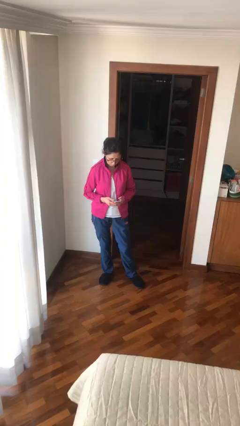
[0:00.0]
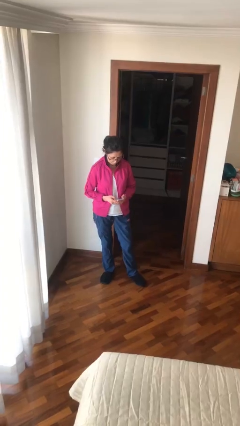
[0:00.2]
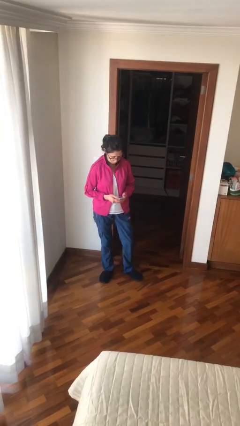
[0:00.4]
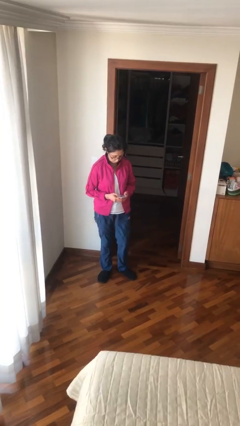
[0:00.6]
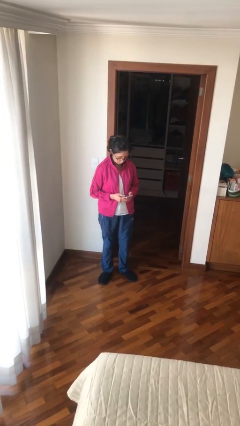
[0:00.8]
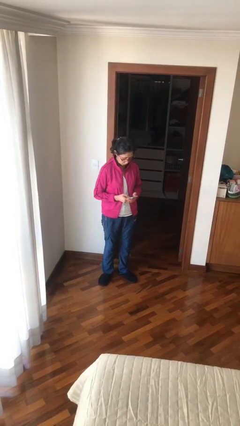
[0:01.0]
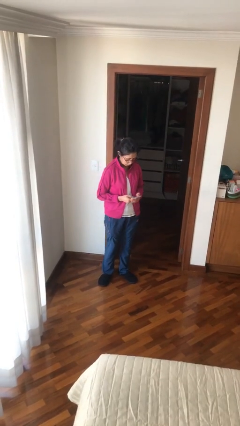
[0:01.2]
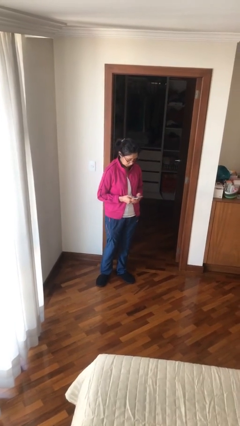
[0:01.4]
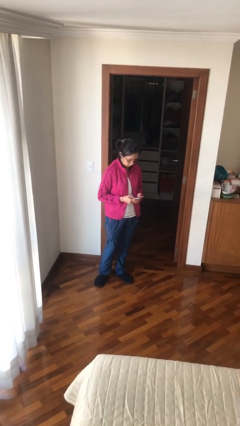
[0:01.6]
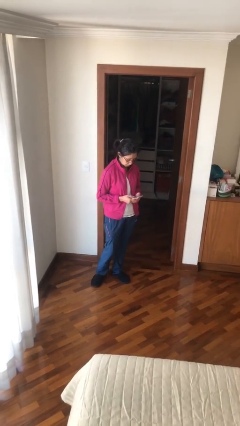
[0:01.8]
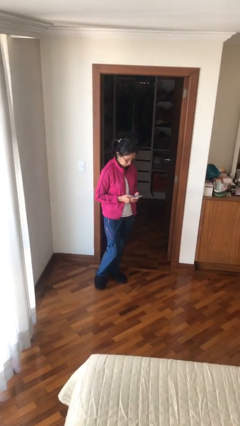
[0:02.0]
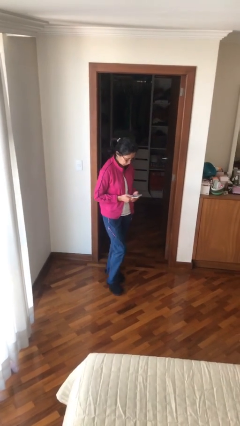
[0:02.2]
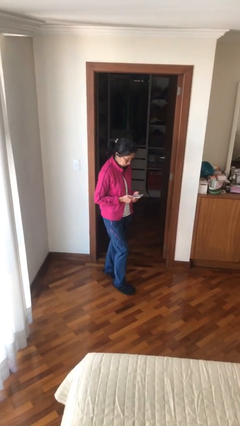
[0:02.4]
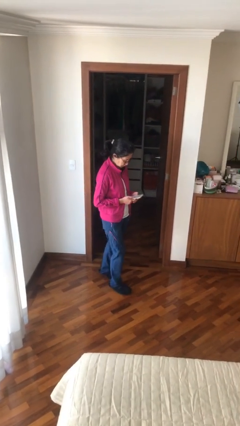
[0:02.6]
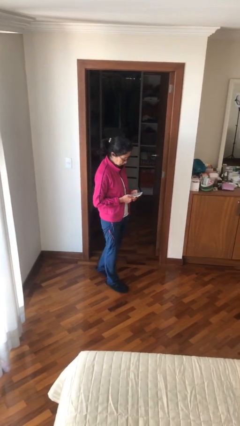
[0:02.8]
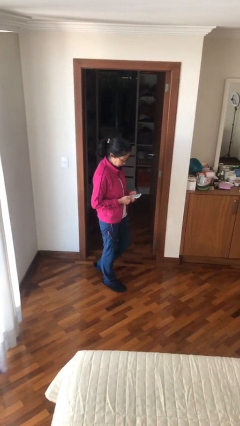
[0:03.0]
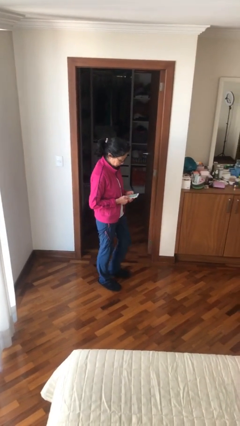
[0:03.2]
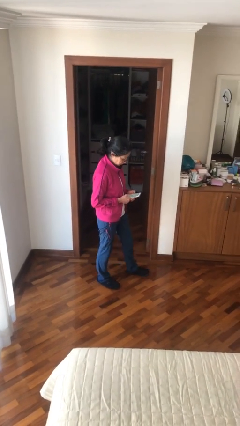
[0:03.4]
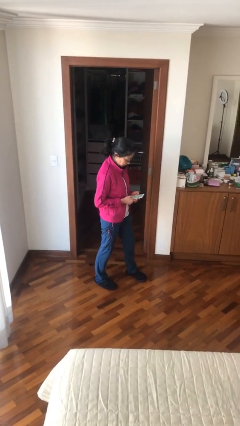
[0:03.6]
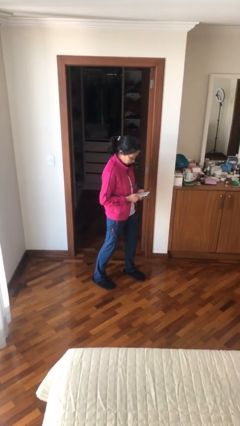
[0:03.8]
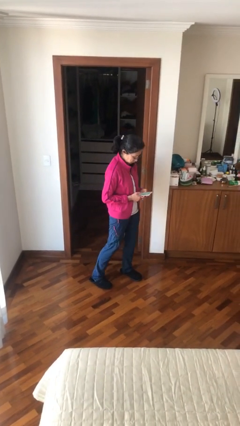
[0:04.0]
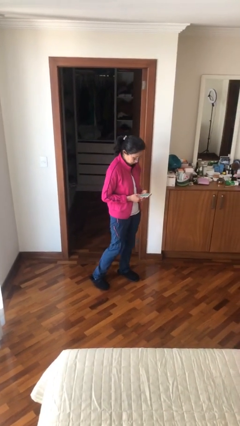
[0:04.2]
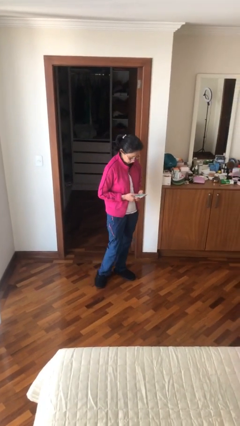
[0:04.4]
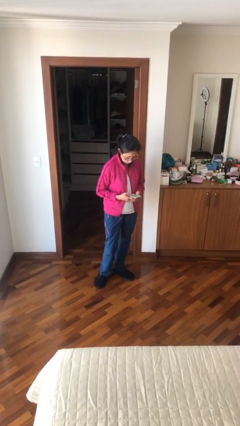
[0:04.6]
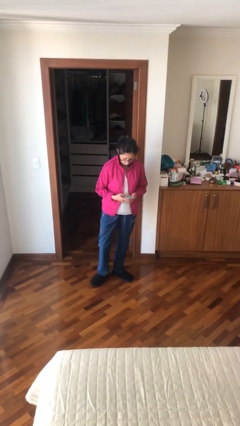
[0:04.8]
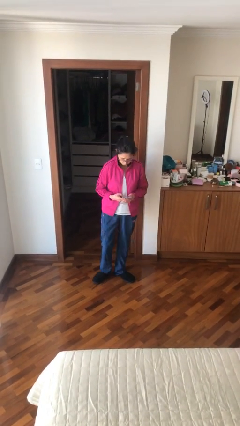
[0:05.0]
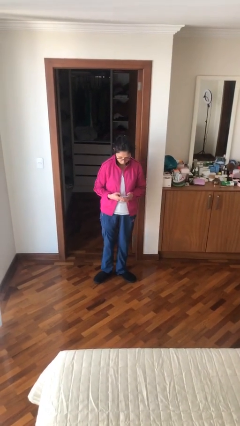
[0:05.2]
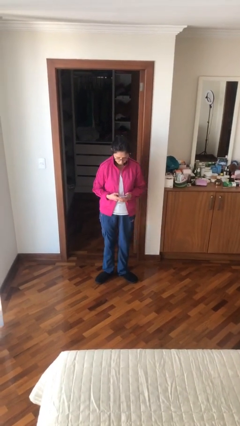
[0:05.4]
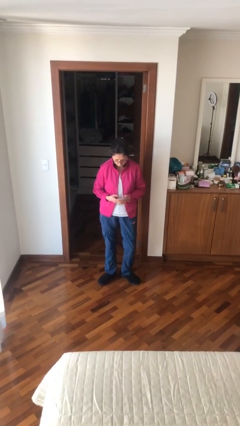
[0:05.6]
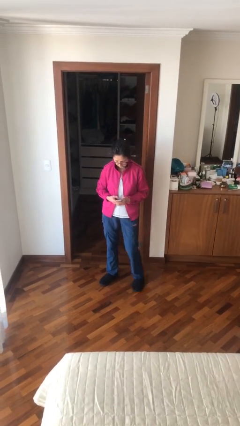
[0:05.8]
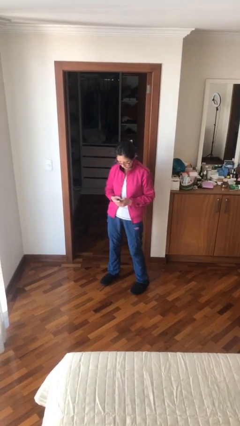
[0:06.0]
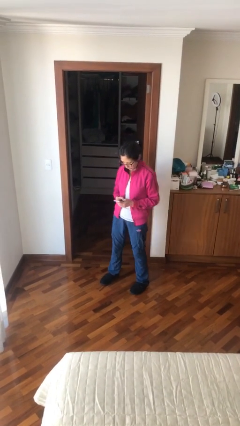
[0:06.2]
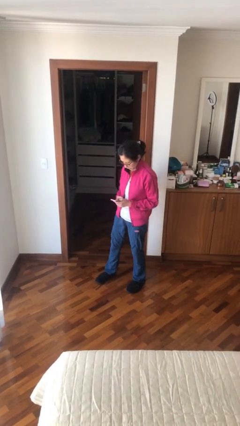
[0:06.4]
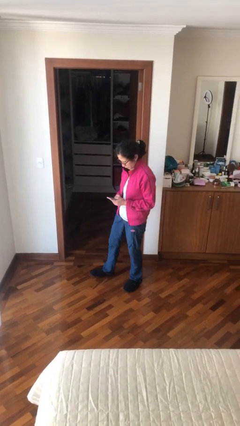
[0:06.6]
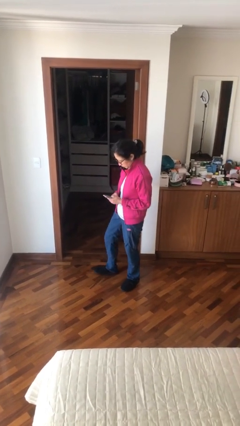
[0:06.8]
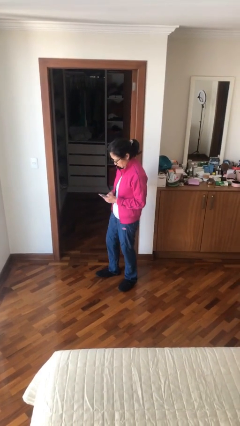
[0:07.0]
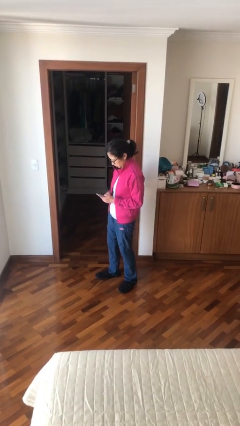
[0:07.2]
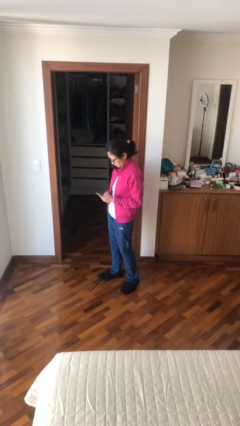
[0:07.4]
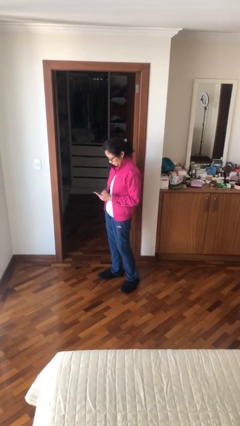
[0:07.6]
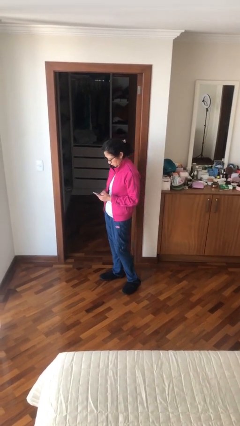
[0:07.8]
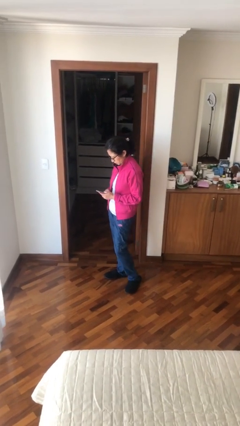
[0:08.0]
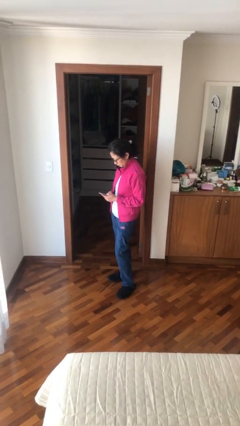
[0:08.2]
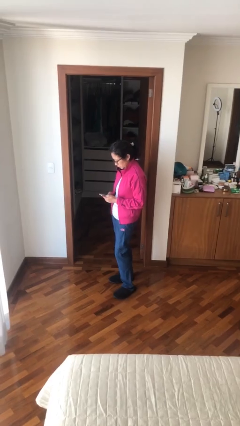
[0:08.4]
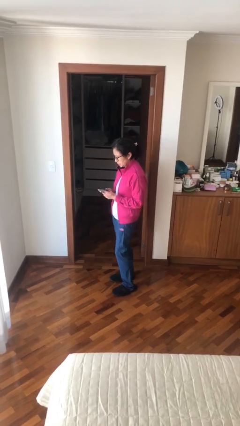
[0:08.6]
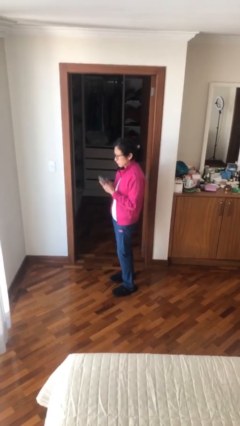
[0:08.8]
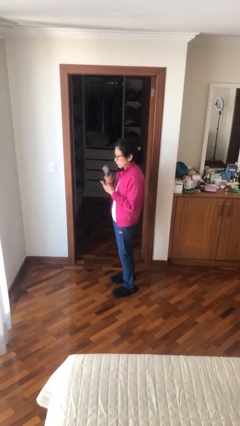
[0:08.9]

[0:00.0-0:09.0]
person texts on phone

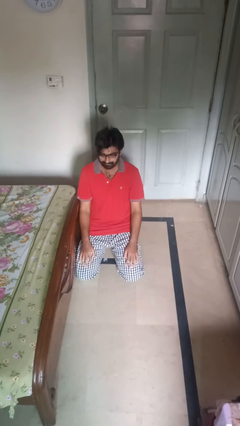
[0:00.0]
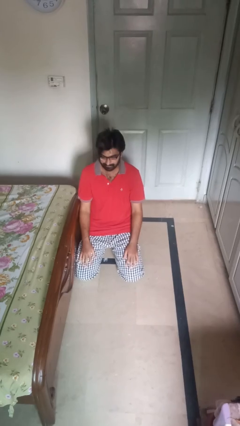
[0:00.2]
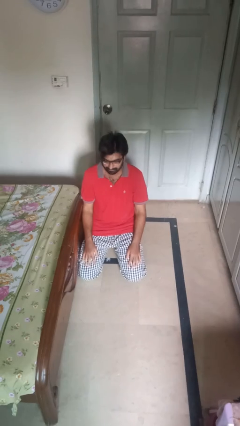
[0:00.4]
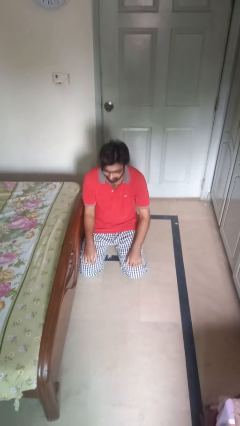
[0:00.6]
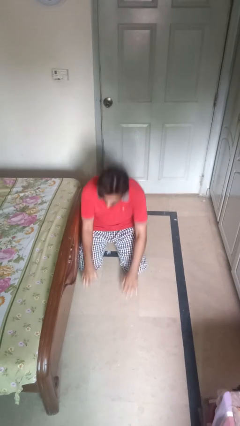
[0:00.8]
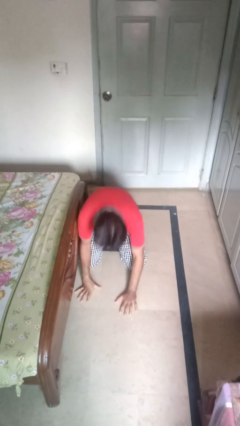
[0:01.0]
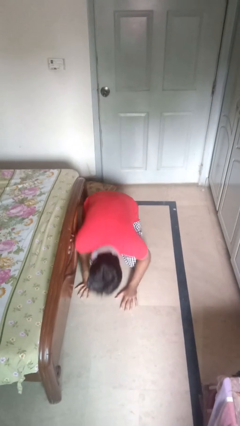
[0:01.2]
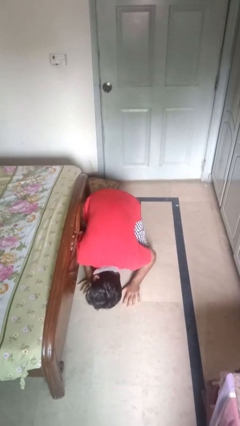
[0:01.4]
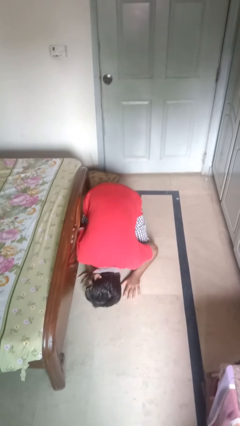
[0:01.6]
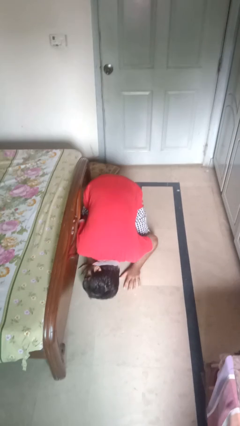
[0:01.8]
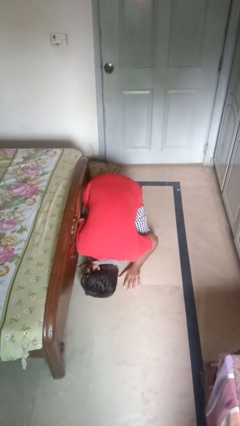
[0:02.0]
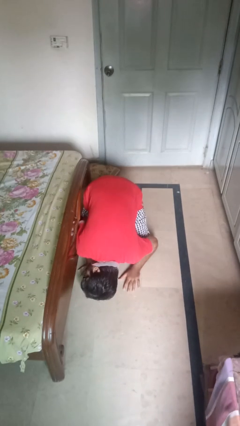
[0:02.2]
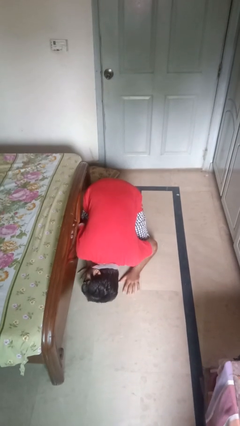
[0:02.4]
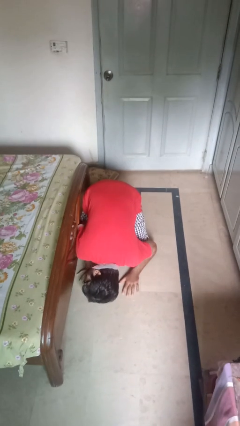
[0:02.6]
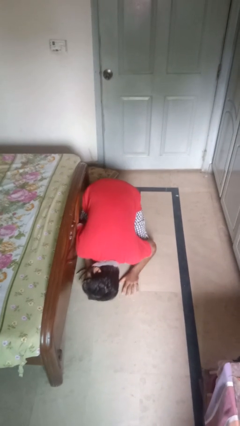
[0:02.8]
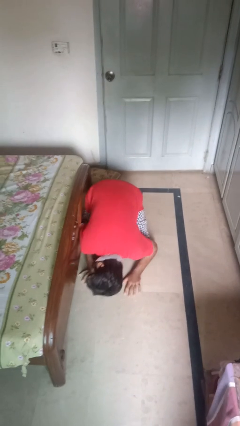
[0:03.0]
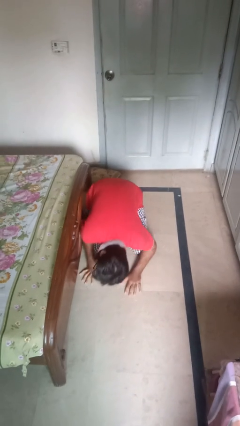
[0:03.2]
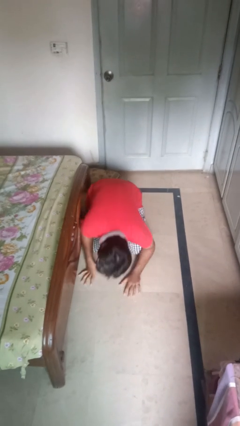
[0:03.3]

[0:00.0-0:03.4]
person searches under bed

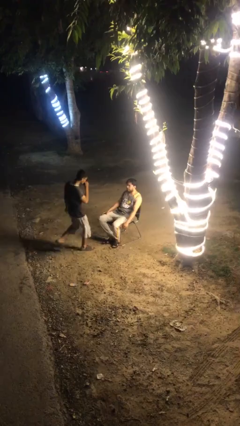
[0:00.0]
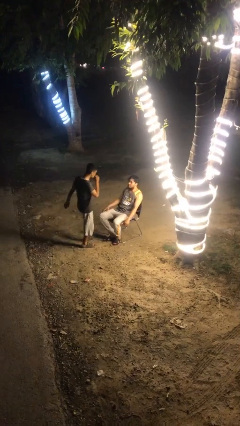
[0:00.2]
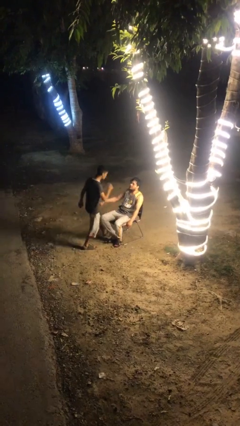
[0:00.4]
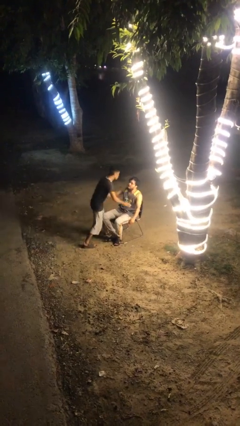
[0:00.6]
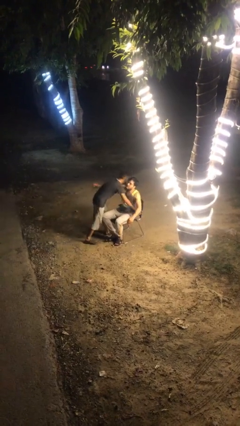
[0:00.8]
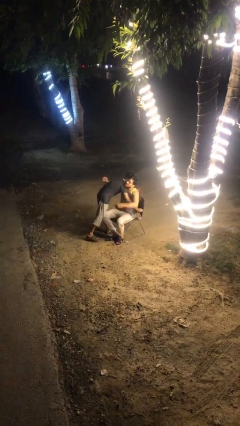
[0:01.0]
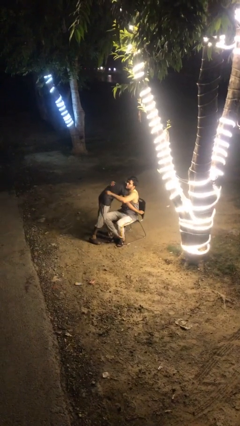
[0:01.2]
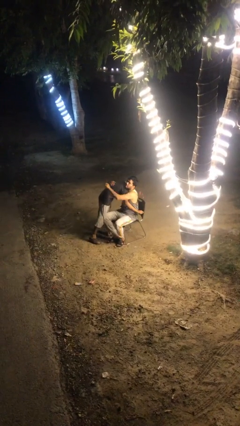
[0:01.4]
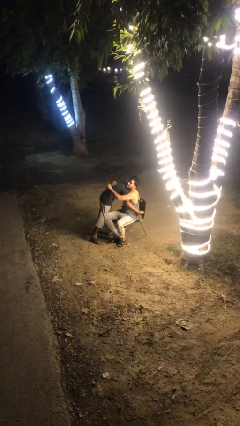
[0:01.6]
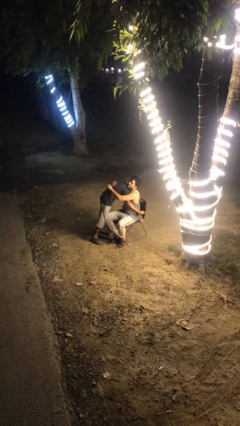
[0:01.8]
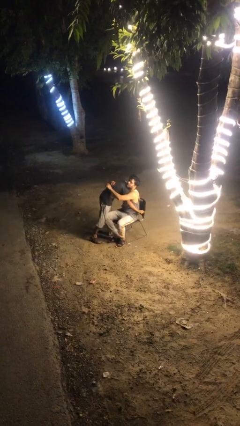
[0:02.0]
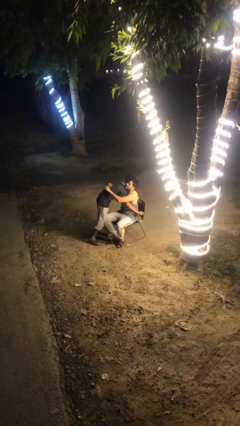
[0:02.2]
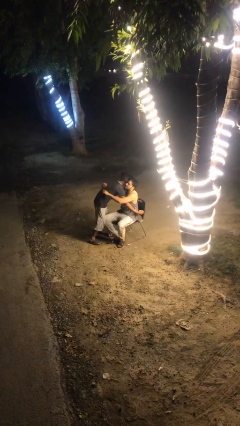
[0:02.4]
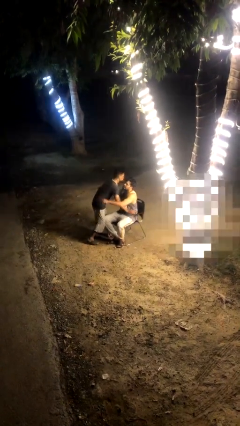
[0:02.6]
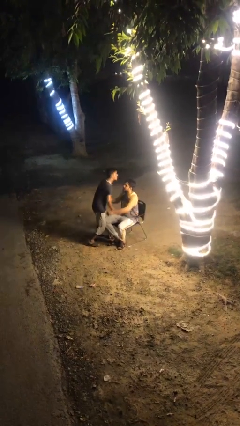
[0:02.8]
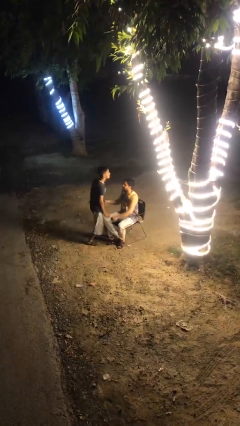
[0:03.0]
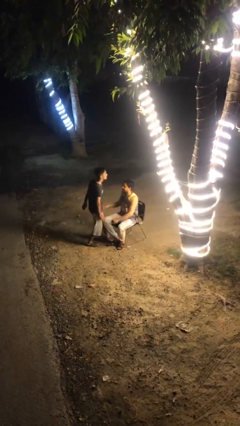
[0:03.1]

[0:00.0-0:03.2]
person embraces person

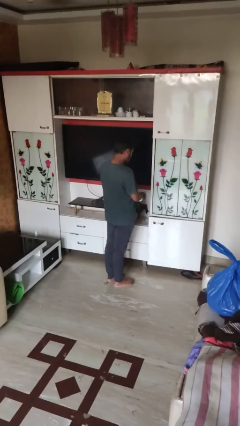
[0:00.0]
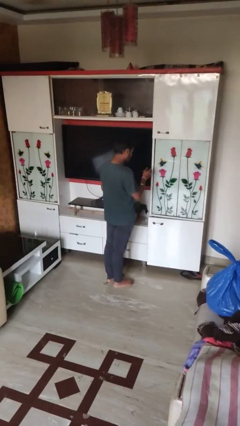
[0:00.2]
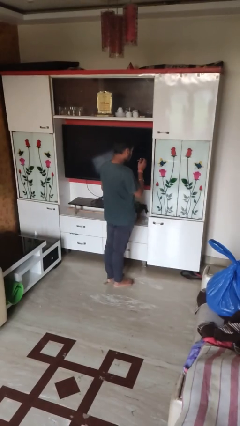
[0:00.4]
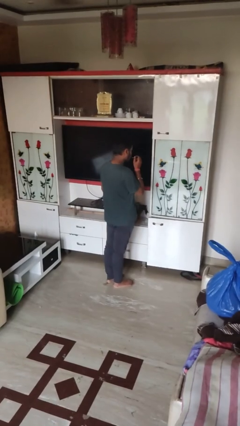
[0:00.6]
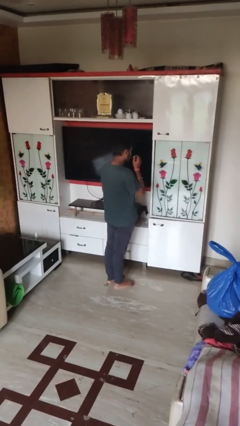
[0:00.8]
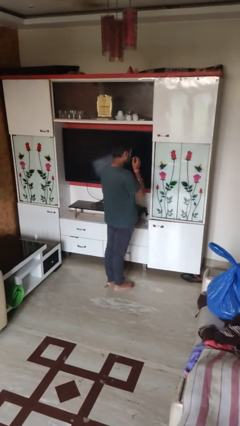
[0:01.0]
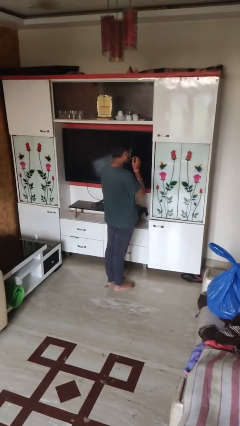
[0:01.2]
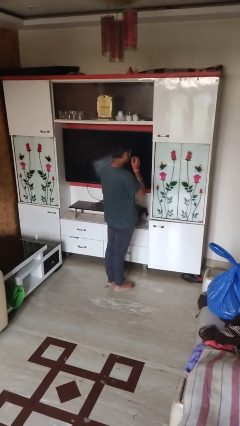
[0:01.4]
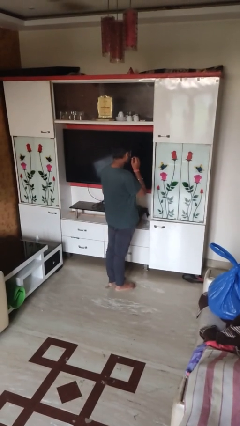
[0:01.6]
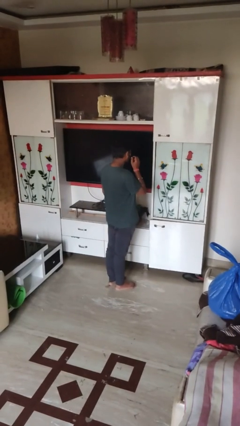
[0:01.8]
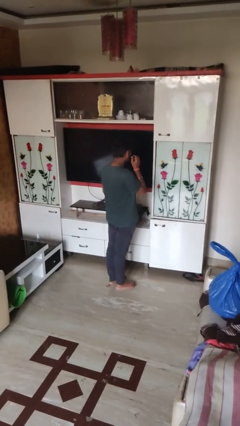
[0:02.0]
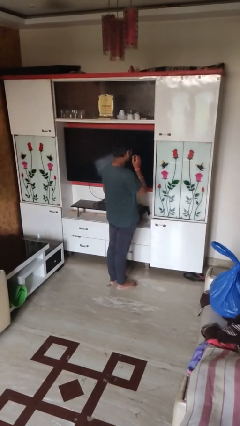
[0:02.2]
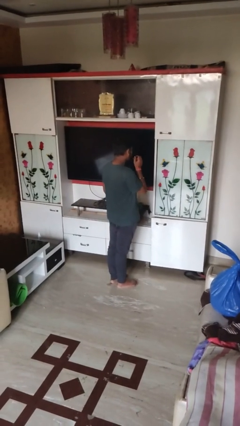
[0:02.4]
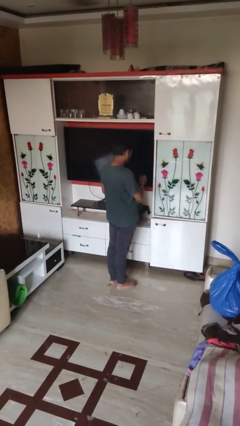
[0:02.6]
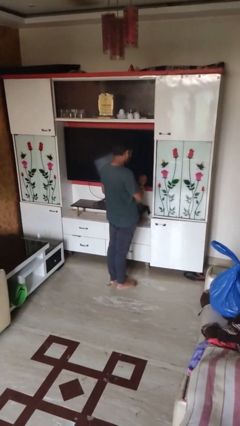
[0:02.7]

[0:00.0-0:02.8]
person applies lip makeup
